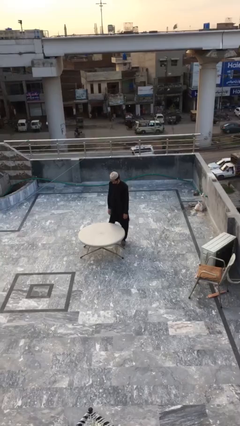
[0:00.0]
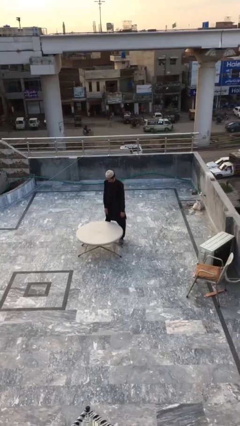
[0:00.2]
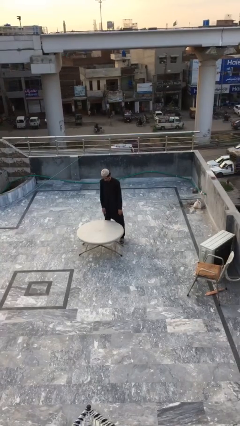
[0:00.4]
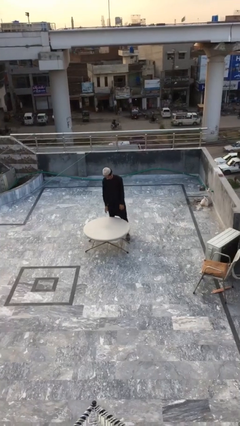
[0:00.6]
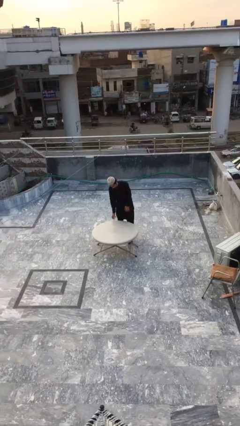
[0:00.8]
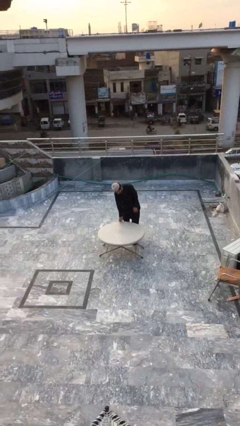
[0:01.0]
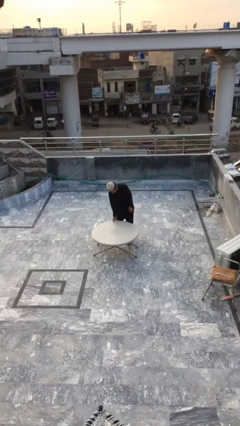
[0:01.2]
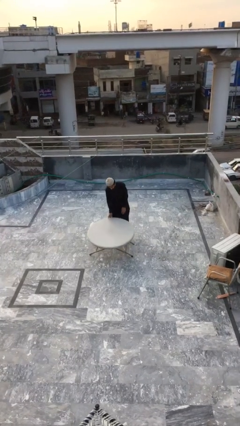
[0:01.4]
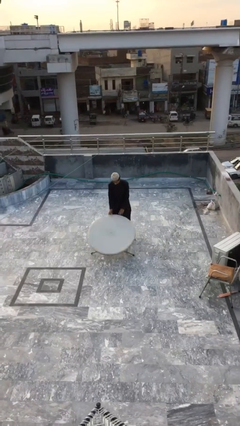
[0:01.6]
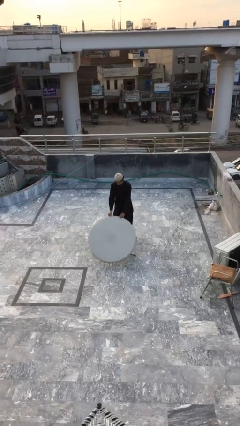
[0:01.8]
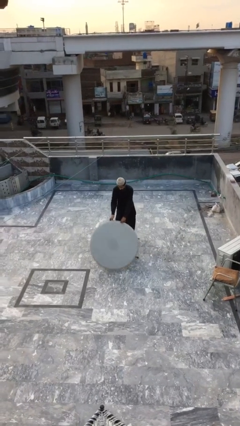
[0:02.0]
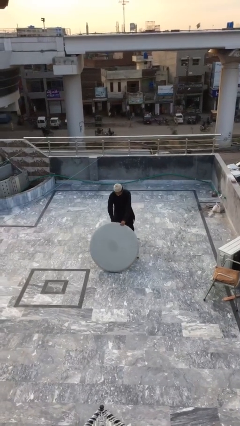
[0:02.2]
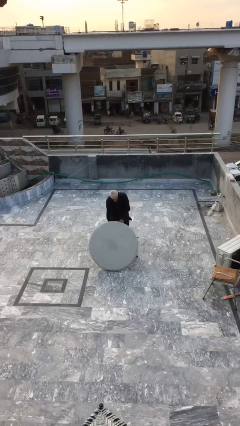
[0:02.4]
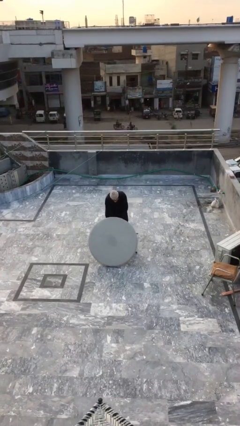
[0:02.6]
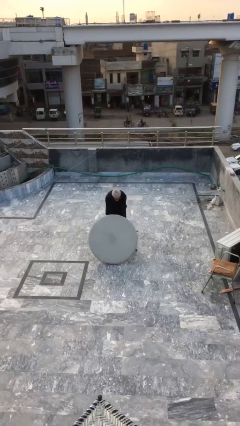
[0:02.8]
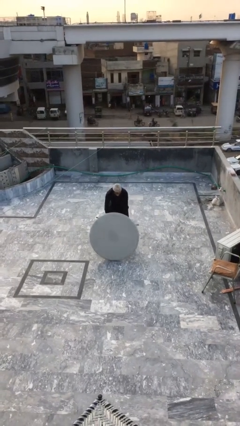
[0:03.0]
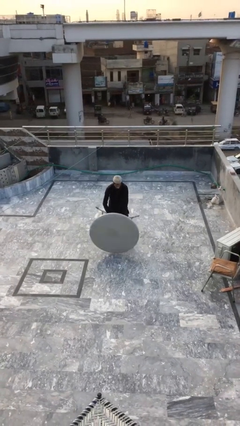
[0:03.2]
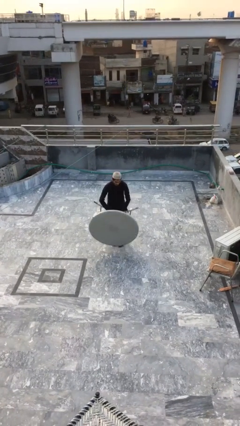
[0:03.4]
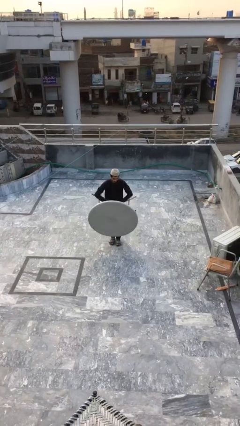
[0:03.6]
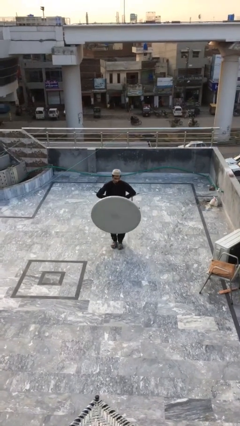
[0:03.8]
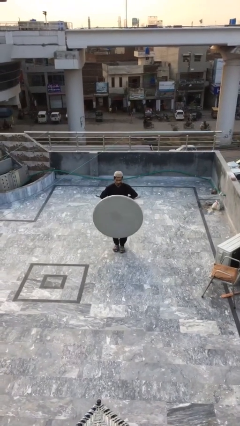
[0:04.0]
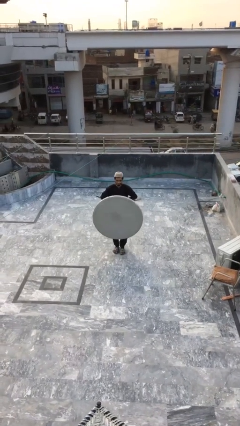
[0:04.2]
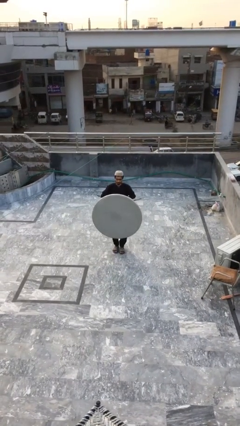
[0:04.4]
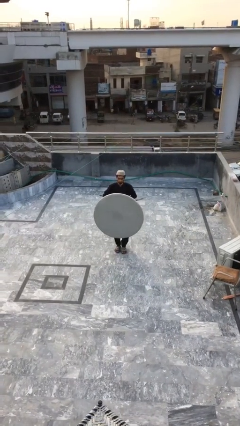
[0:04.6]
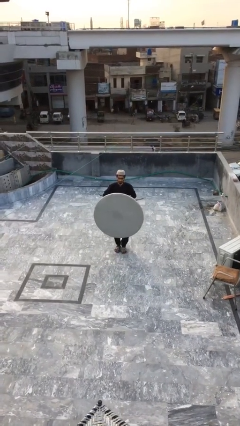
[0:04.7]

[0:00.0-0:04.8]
person picks up object from floor

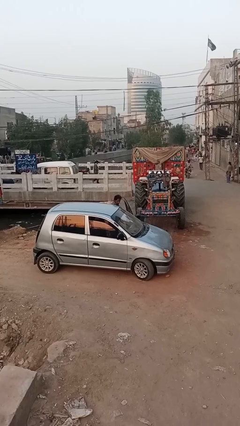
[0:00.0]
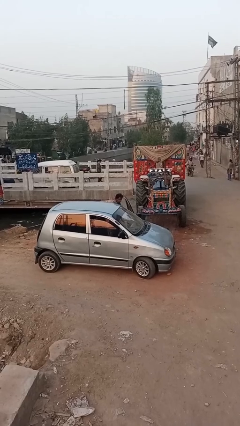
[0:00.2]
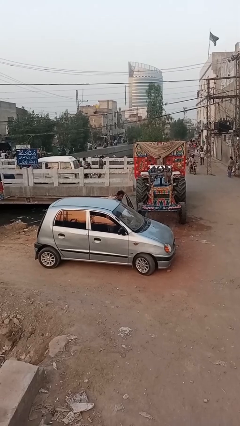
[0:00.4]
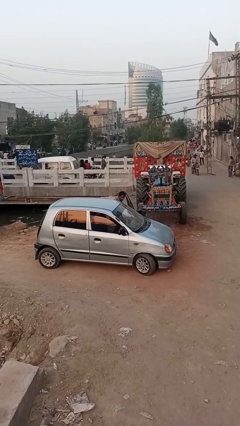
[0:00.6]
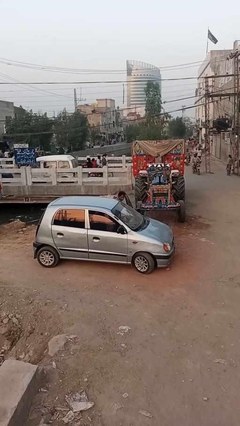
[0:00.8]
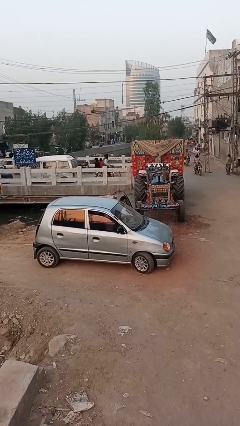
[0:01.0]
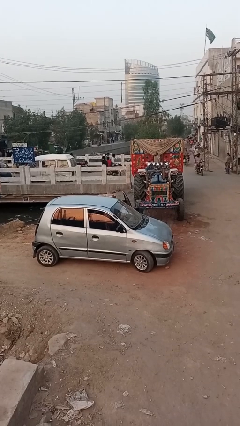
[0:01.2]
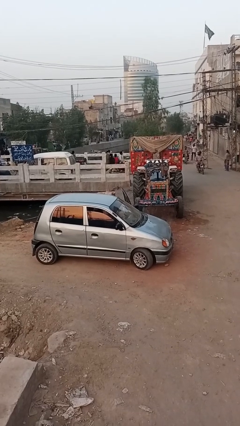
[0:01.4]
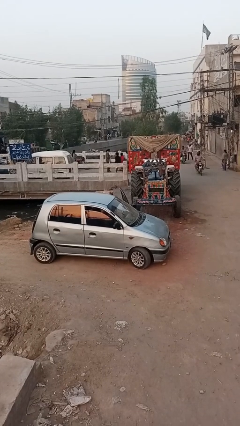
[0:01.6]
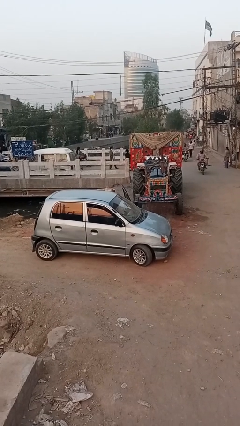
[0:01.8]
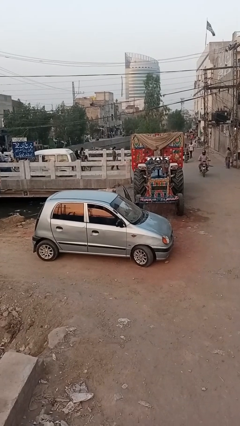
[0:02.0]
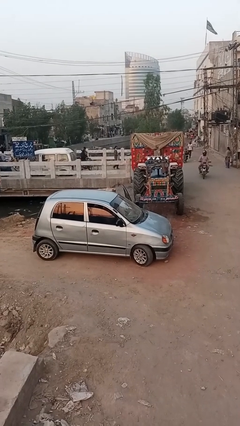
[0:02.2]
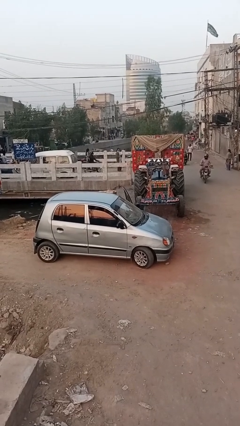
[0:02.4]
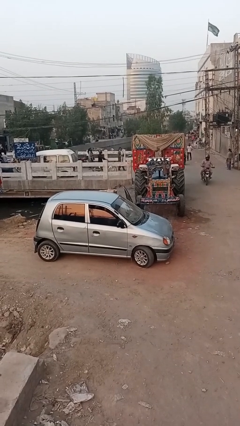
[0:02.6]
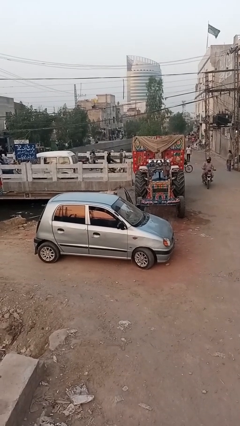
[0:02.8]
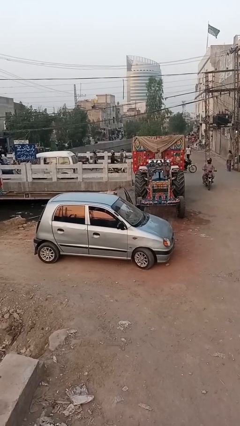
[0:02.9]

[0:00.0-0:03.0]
person enters car

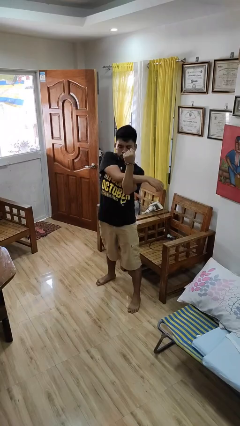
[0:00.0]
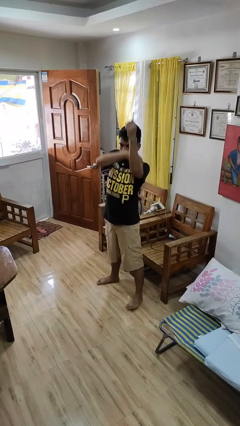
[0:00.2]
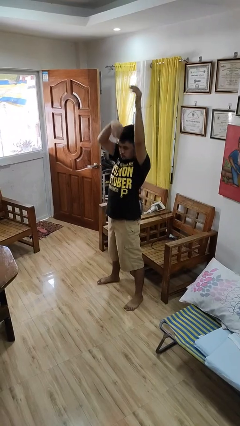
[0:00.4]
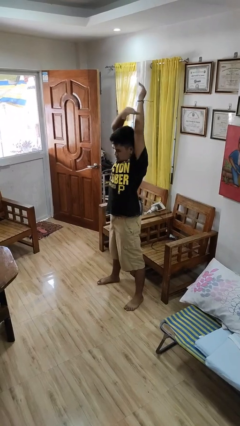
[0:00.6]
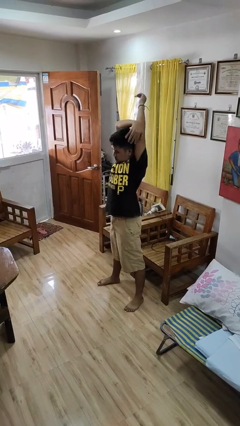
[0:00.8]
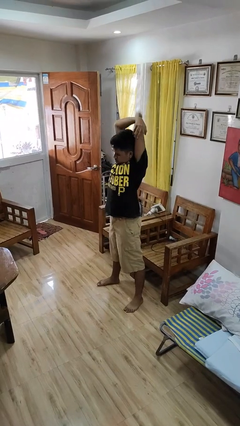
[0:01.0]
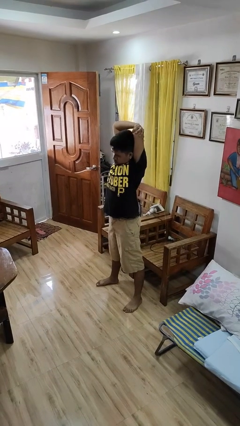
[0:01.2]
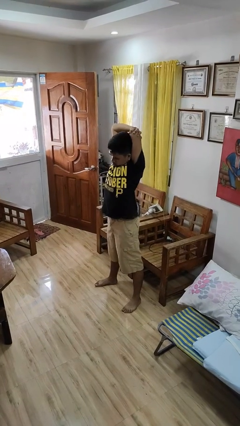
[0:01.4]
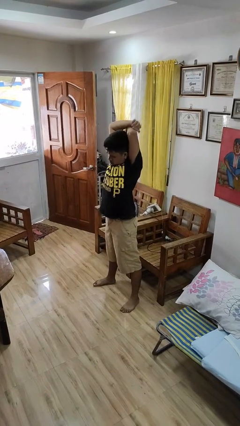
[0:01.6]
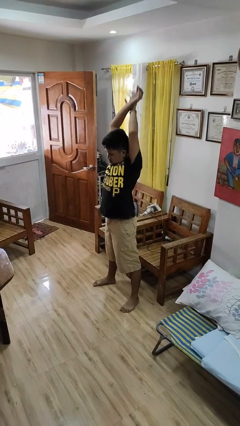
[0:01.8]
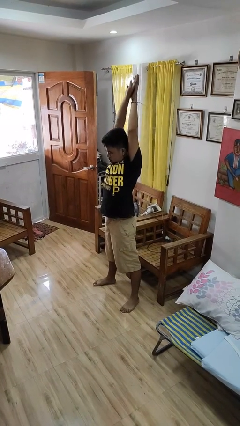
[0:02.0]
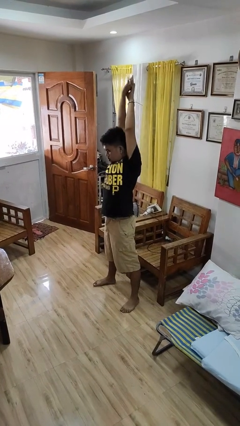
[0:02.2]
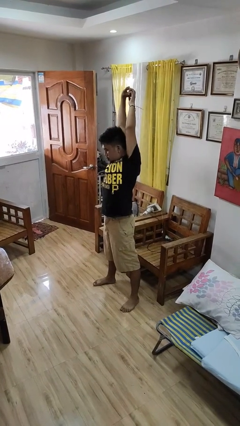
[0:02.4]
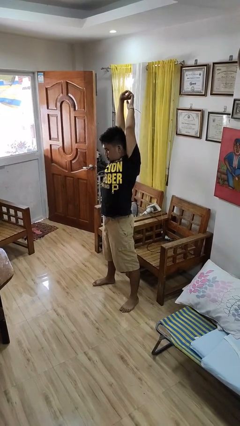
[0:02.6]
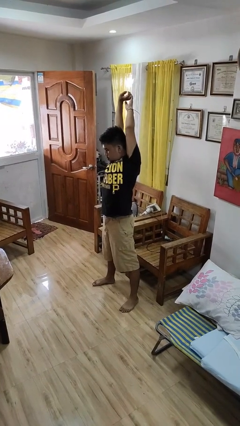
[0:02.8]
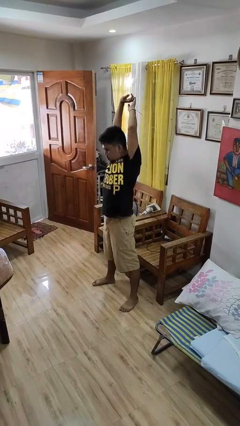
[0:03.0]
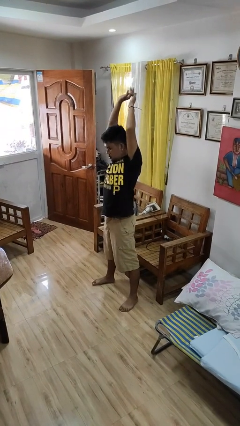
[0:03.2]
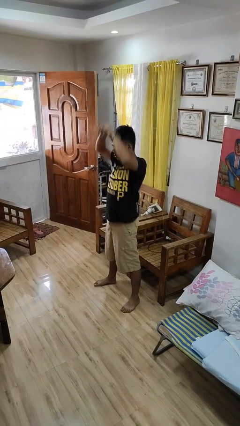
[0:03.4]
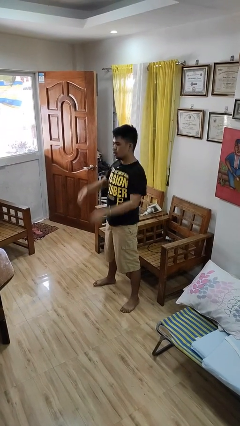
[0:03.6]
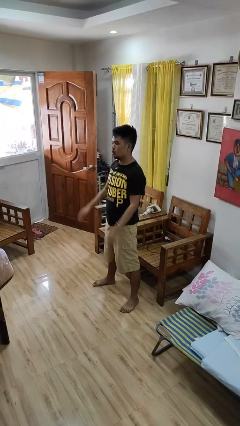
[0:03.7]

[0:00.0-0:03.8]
person stretches arms over head

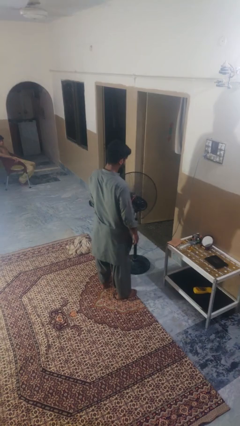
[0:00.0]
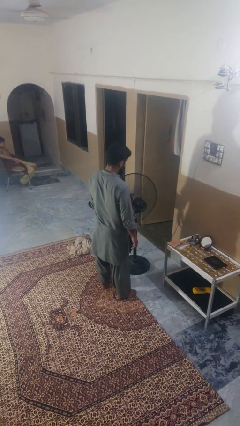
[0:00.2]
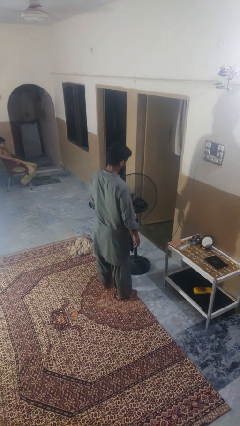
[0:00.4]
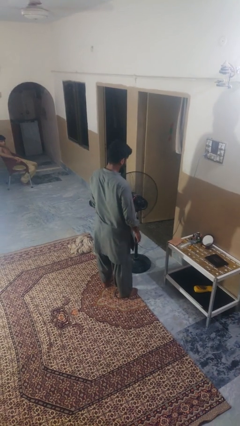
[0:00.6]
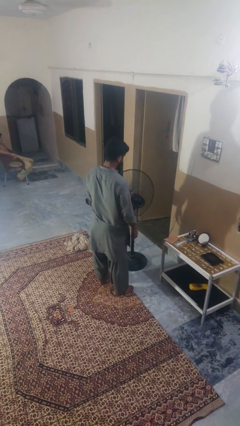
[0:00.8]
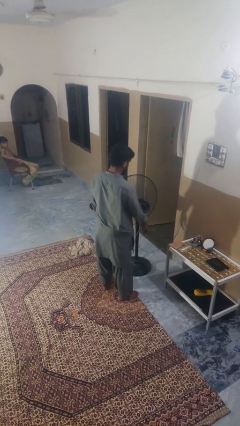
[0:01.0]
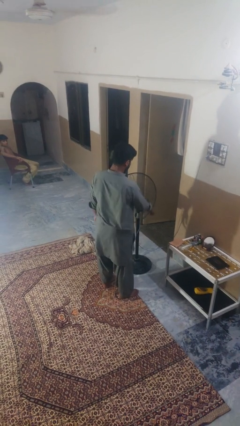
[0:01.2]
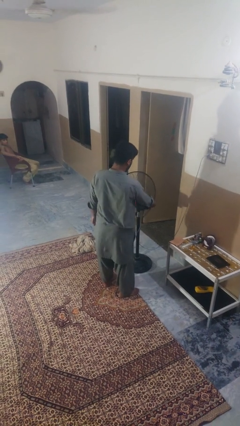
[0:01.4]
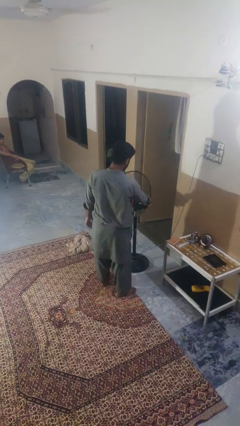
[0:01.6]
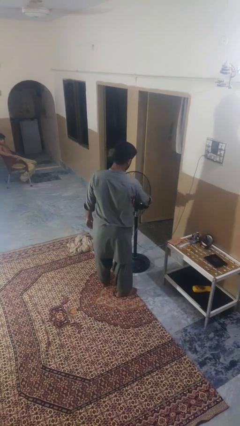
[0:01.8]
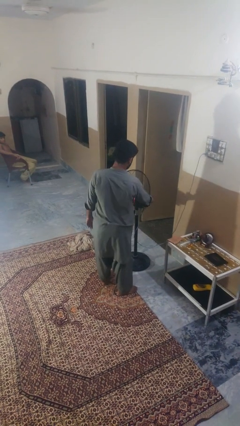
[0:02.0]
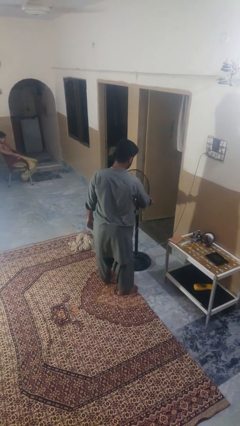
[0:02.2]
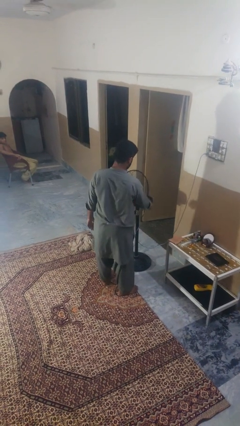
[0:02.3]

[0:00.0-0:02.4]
person turns off fan

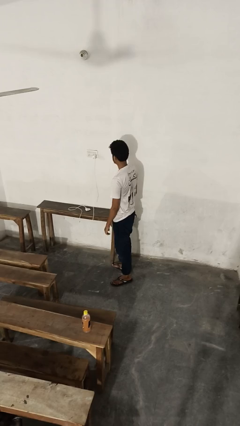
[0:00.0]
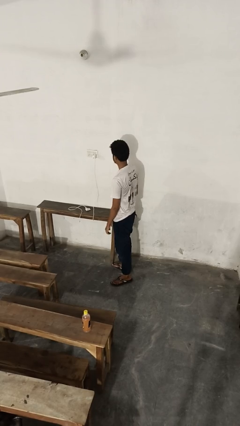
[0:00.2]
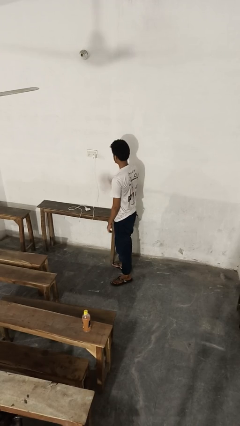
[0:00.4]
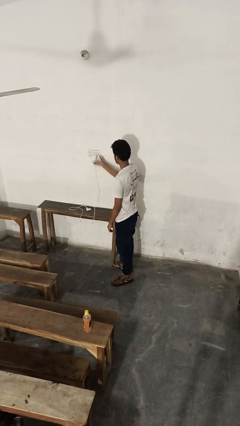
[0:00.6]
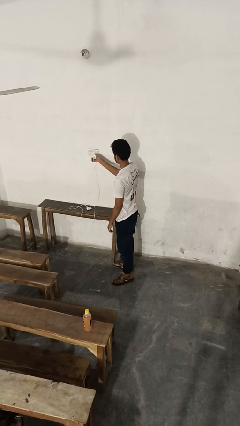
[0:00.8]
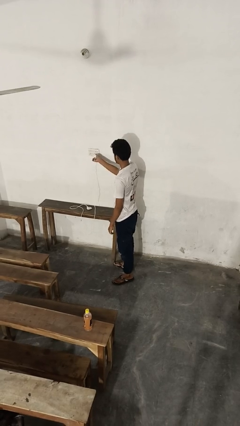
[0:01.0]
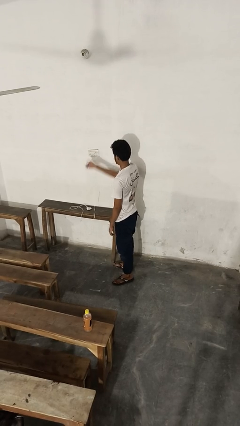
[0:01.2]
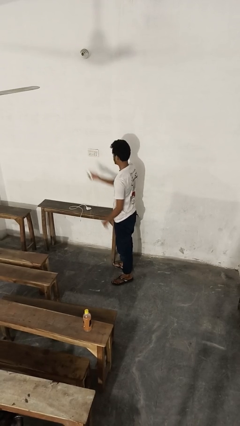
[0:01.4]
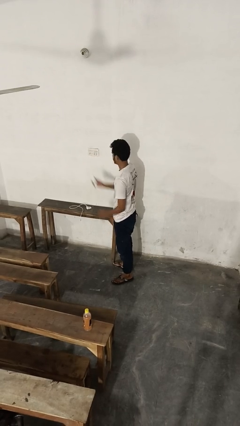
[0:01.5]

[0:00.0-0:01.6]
person unplugs from electrical socket

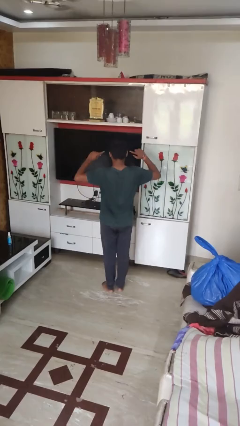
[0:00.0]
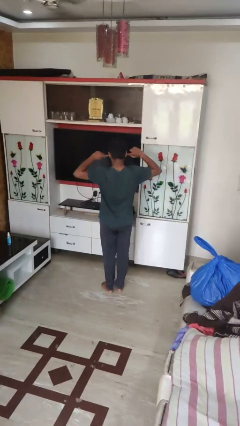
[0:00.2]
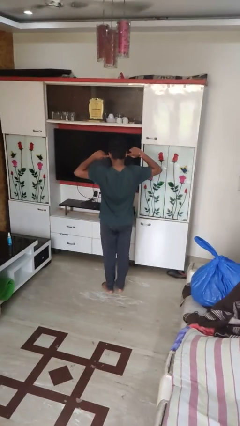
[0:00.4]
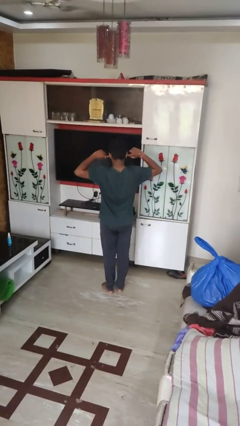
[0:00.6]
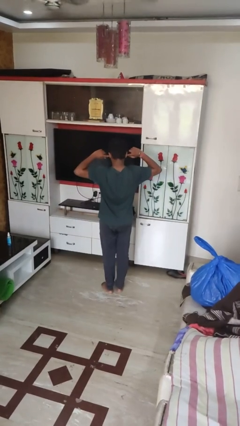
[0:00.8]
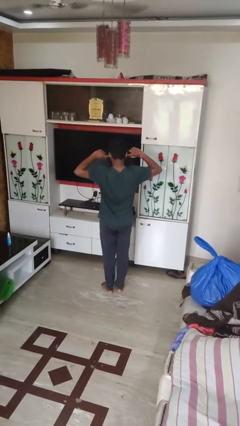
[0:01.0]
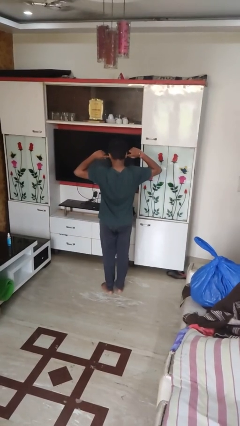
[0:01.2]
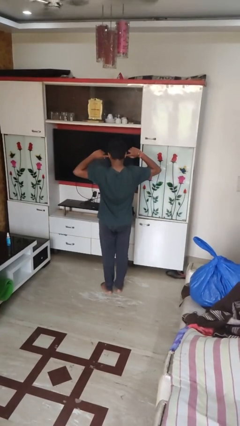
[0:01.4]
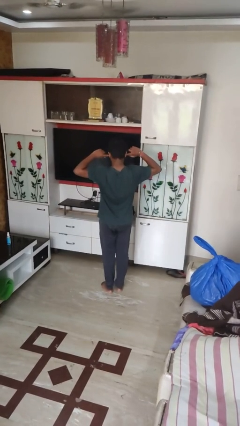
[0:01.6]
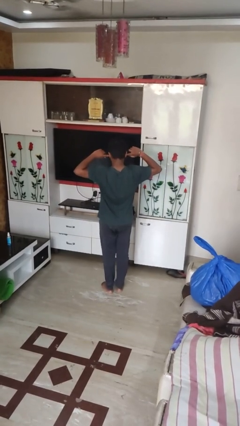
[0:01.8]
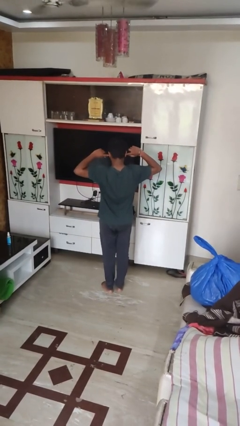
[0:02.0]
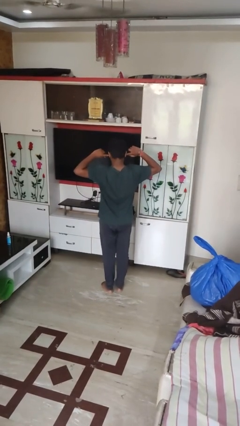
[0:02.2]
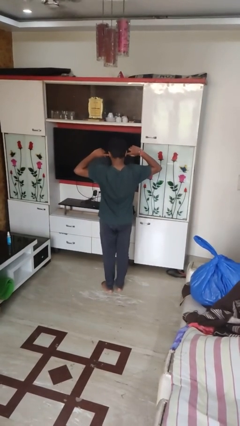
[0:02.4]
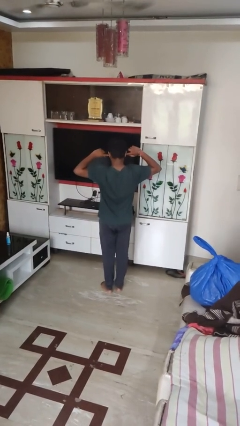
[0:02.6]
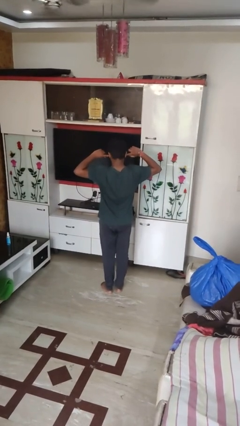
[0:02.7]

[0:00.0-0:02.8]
person puts fingers in ear
